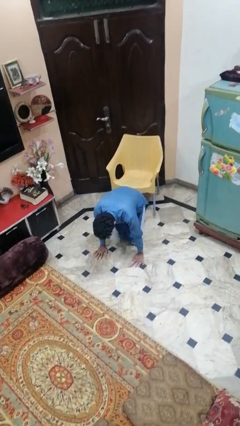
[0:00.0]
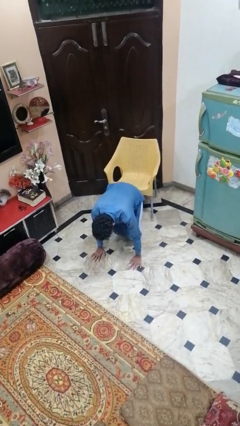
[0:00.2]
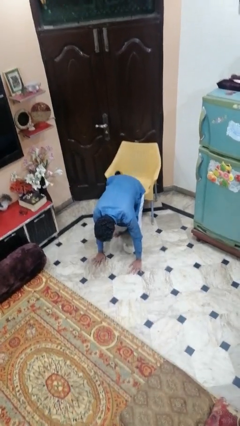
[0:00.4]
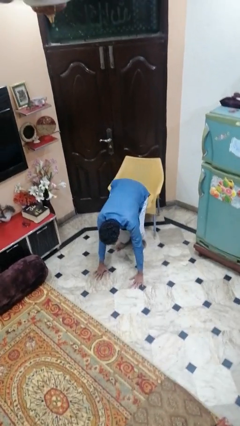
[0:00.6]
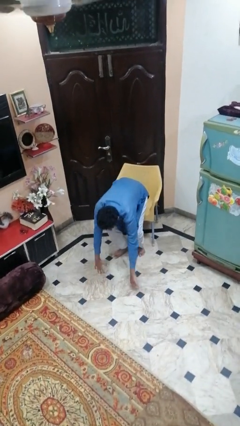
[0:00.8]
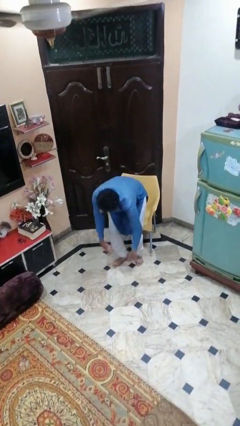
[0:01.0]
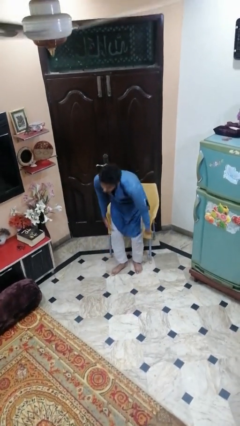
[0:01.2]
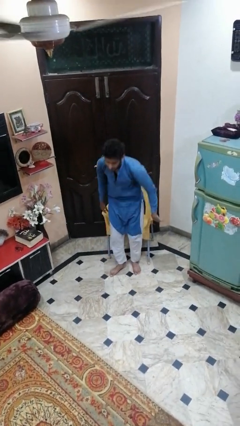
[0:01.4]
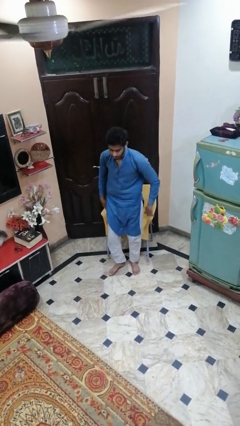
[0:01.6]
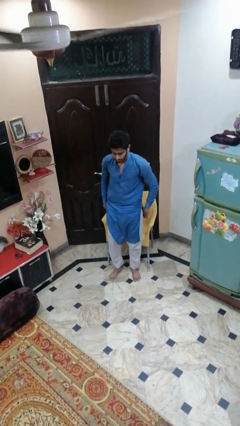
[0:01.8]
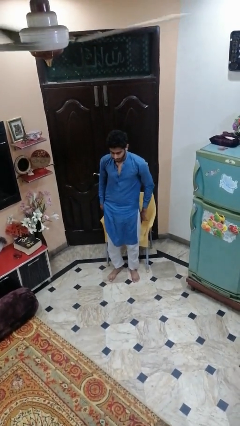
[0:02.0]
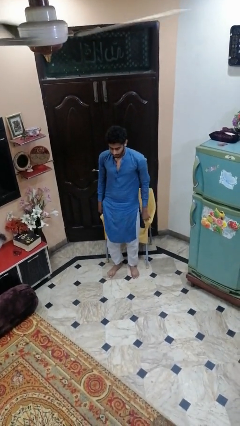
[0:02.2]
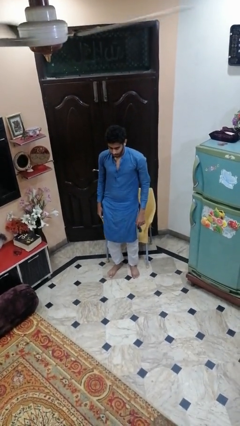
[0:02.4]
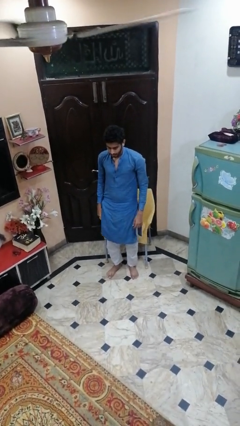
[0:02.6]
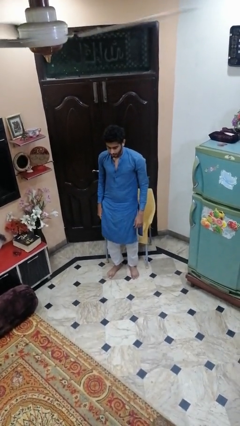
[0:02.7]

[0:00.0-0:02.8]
person stands up from floor

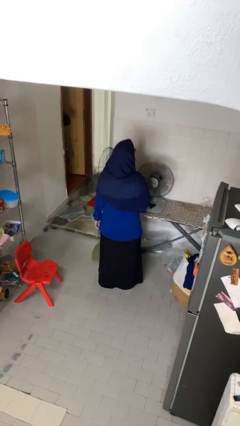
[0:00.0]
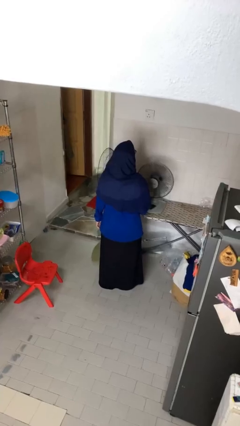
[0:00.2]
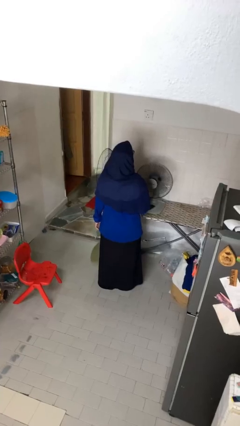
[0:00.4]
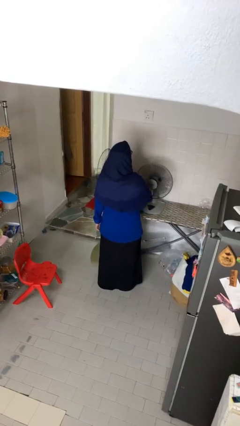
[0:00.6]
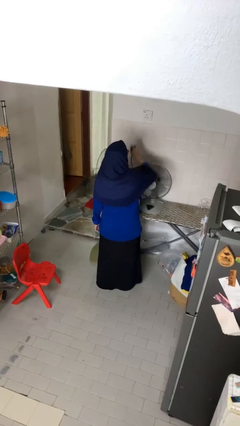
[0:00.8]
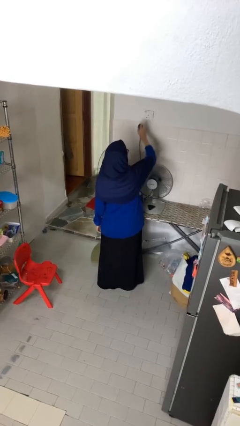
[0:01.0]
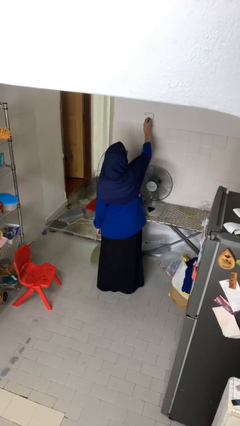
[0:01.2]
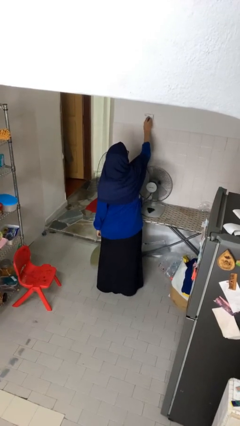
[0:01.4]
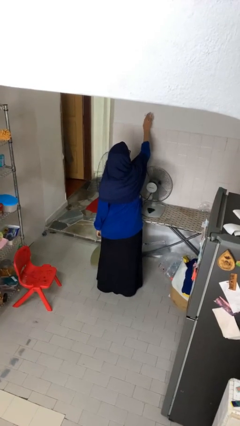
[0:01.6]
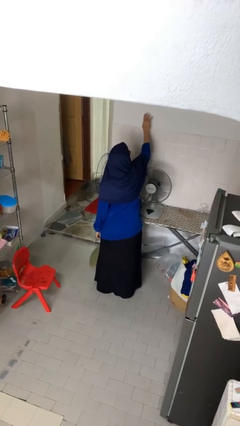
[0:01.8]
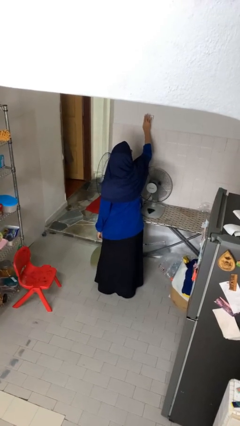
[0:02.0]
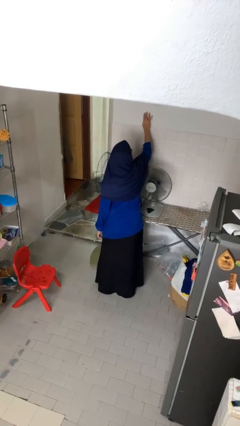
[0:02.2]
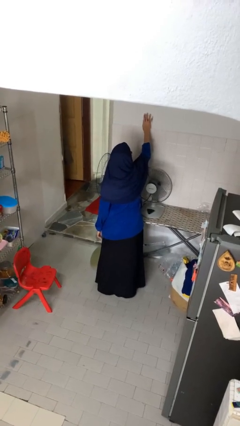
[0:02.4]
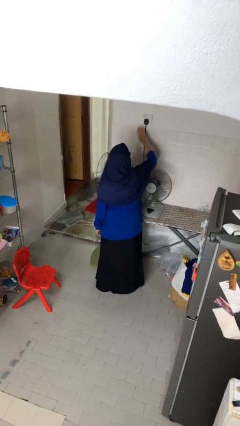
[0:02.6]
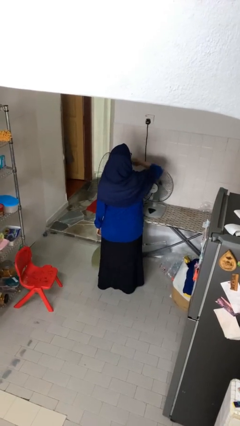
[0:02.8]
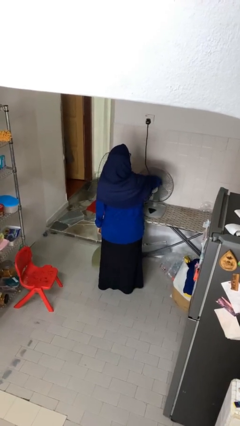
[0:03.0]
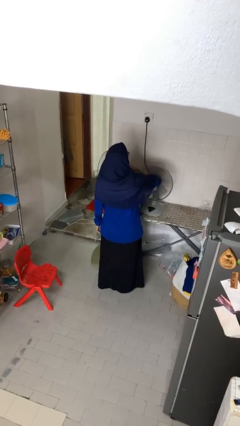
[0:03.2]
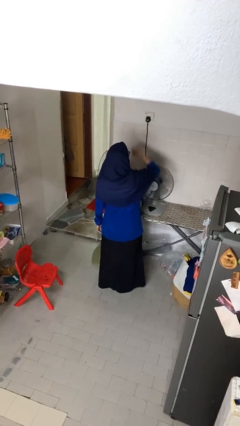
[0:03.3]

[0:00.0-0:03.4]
person plugs into electrical socket

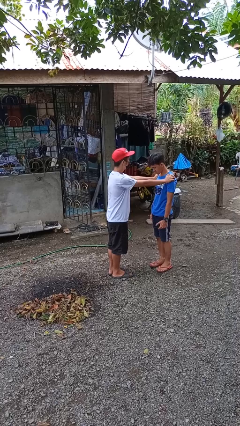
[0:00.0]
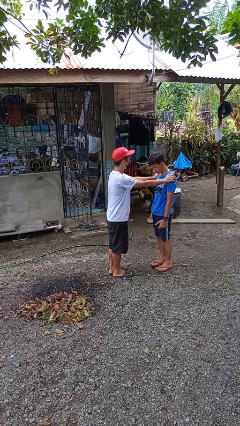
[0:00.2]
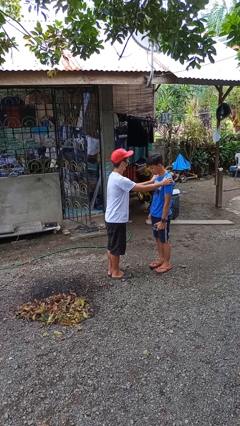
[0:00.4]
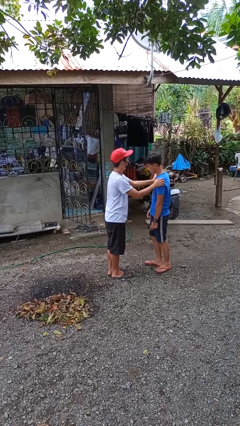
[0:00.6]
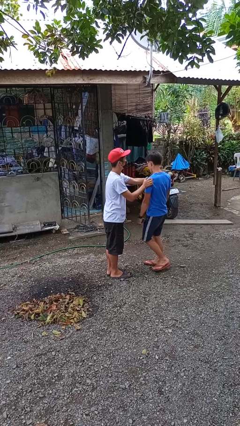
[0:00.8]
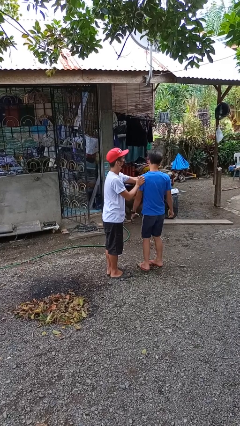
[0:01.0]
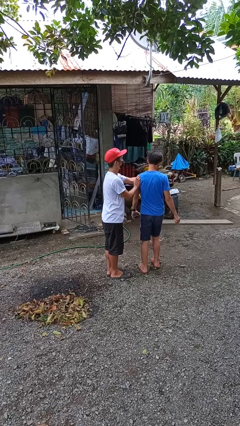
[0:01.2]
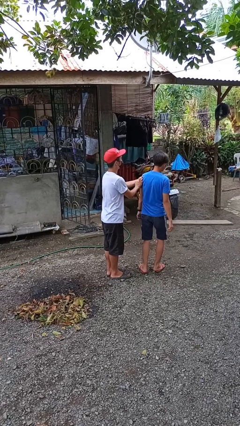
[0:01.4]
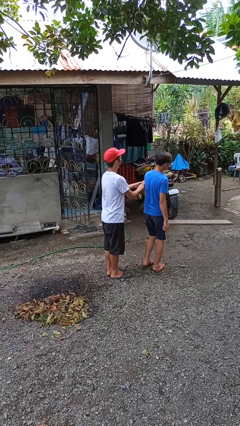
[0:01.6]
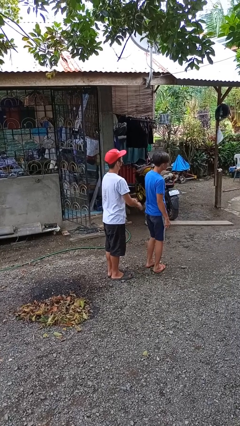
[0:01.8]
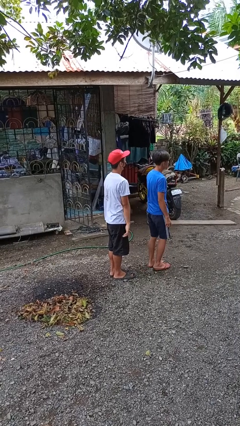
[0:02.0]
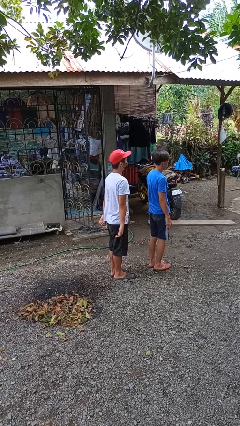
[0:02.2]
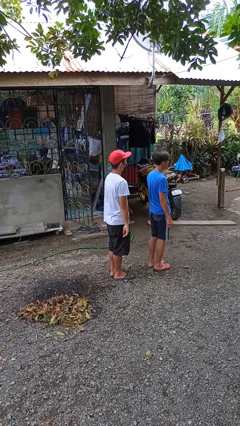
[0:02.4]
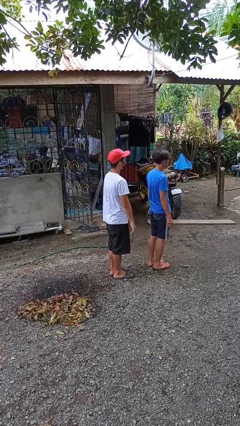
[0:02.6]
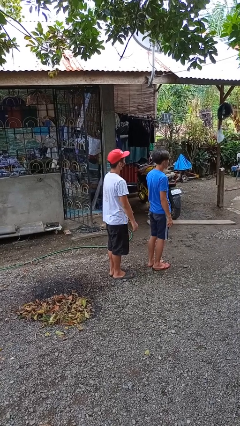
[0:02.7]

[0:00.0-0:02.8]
person spins person around

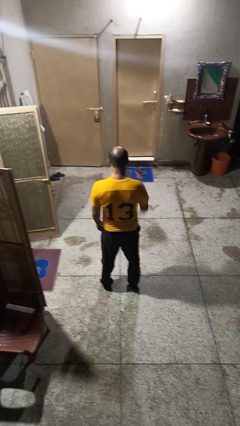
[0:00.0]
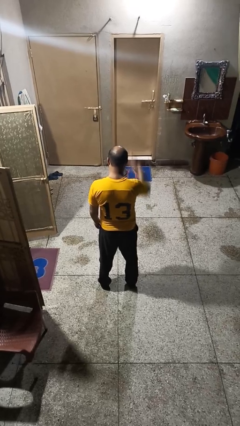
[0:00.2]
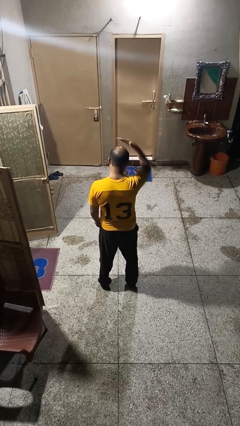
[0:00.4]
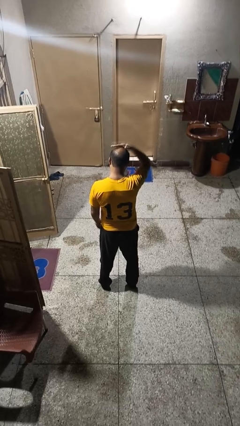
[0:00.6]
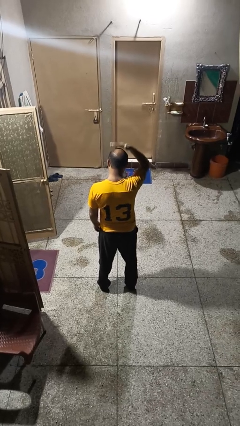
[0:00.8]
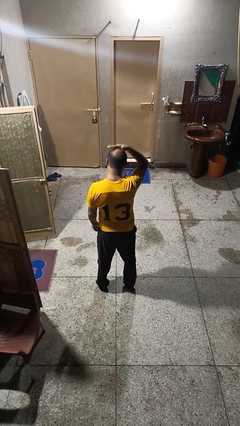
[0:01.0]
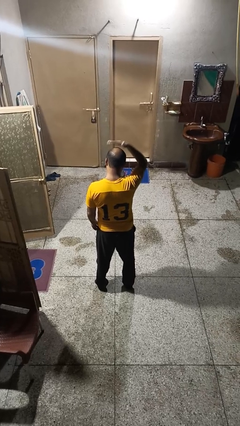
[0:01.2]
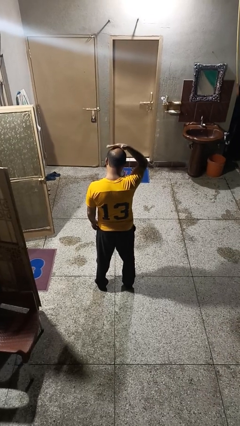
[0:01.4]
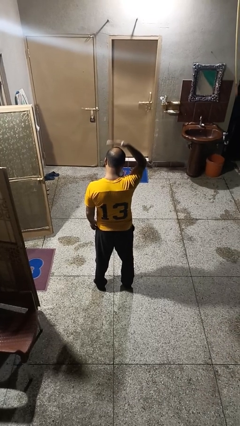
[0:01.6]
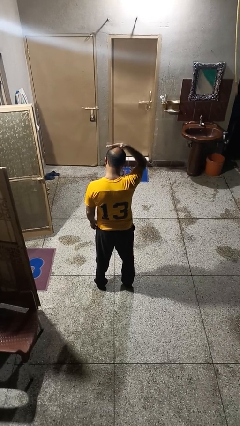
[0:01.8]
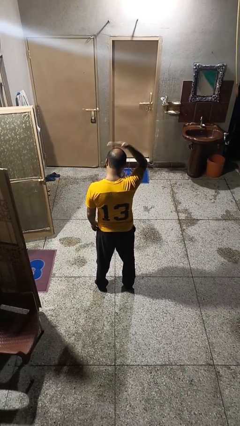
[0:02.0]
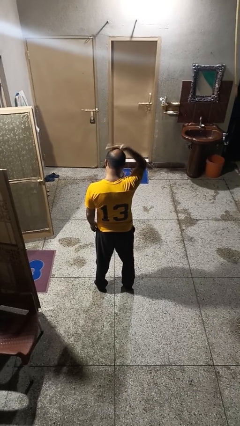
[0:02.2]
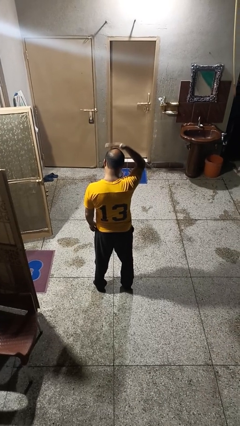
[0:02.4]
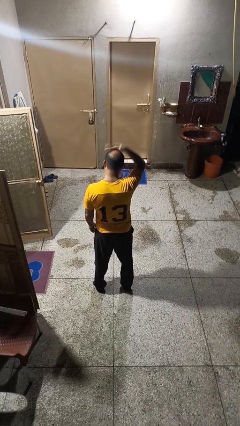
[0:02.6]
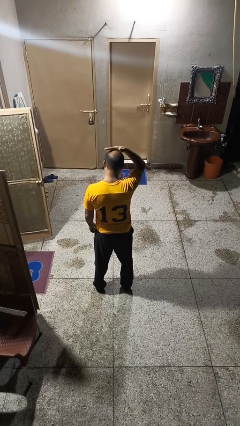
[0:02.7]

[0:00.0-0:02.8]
person pats head

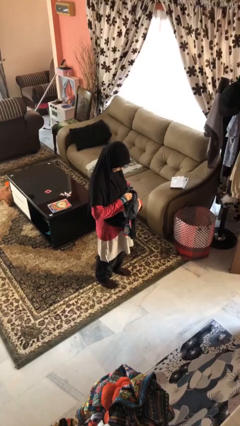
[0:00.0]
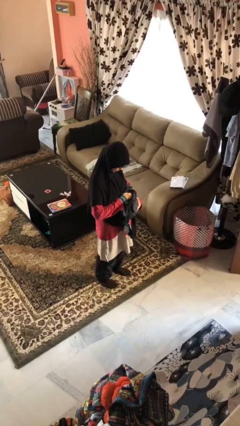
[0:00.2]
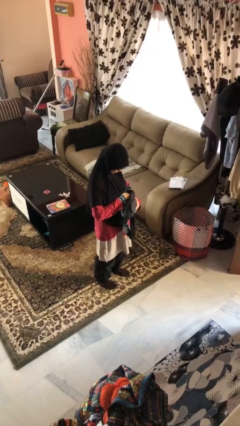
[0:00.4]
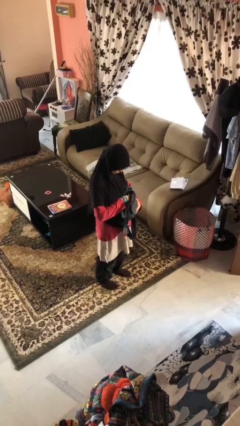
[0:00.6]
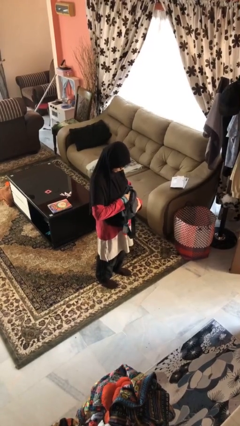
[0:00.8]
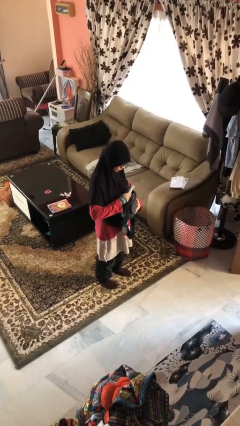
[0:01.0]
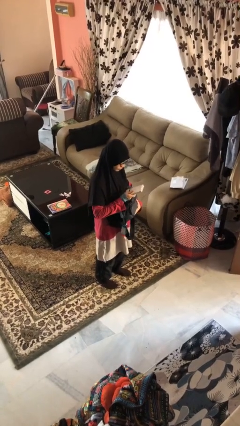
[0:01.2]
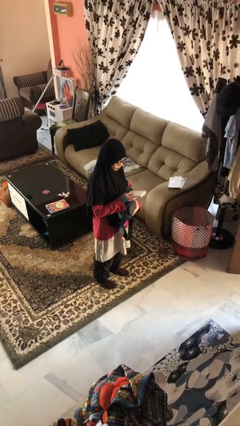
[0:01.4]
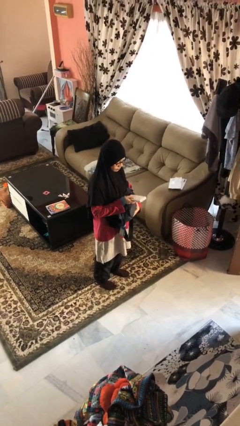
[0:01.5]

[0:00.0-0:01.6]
person takes object from purse

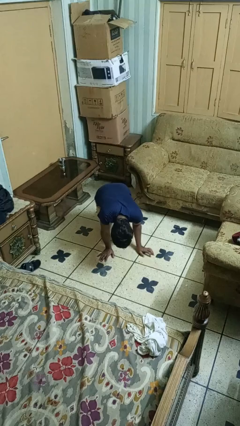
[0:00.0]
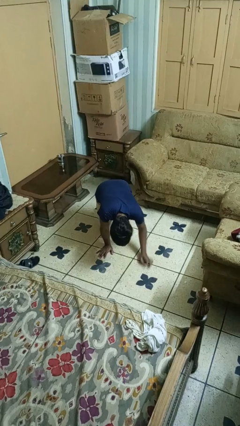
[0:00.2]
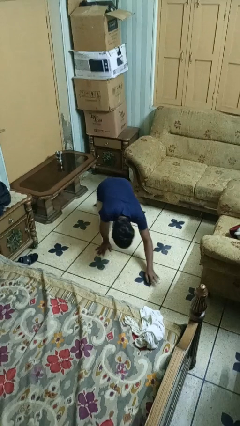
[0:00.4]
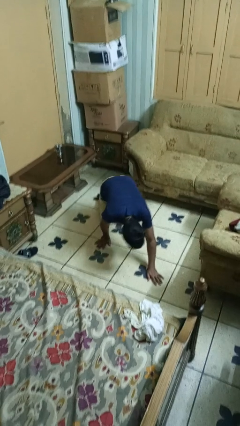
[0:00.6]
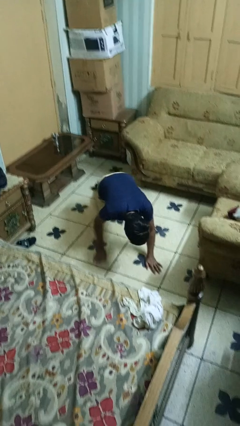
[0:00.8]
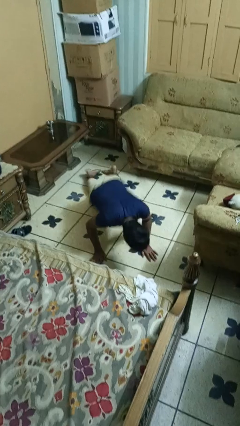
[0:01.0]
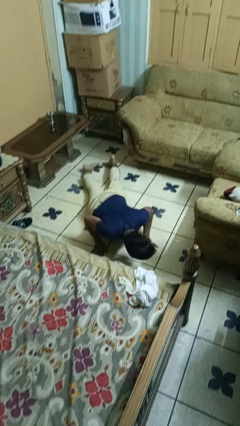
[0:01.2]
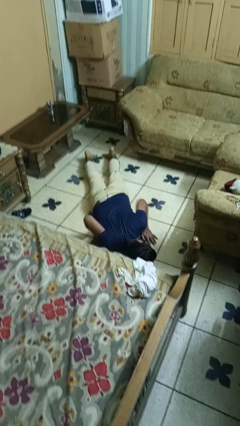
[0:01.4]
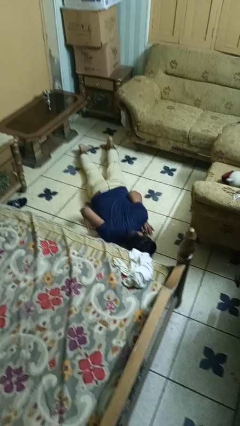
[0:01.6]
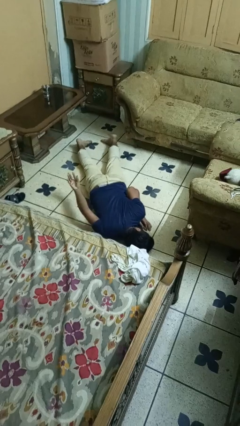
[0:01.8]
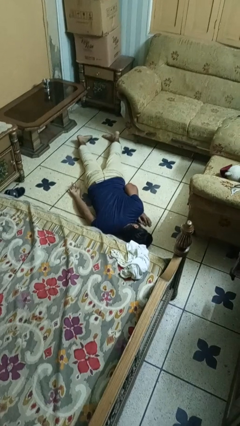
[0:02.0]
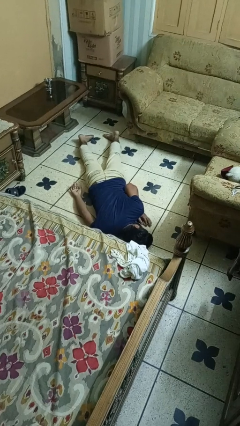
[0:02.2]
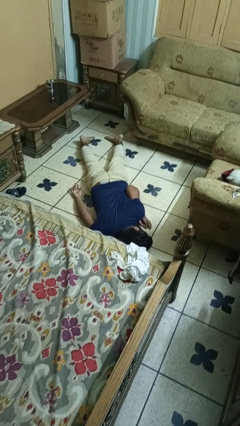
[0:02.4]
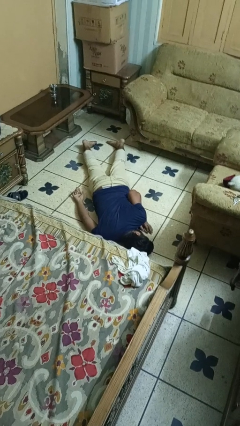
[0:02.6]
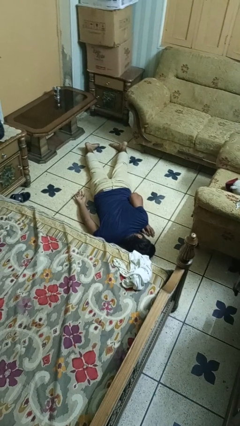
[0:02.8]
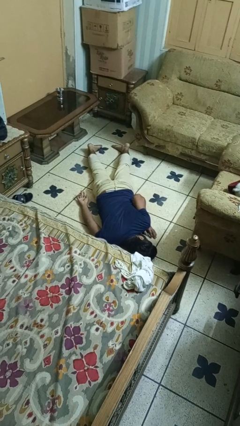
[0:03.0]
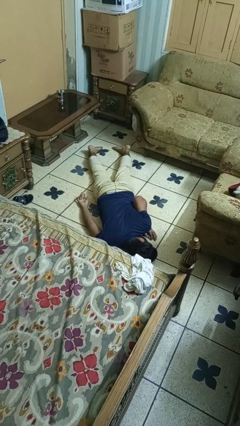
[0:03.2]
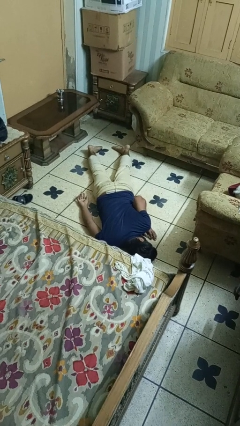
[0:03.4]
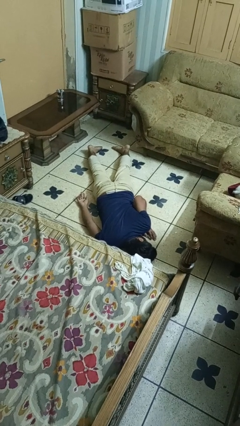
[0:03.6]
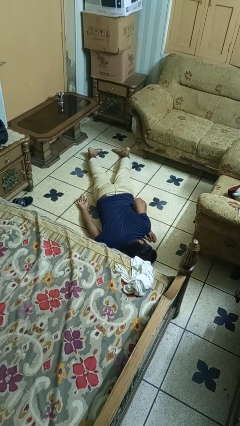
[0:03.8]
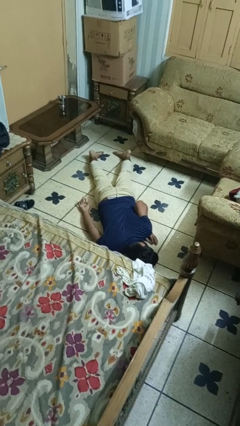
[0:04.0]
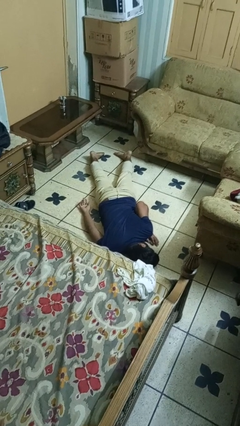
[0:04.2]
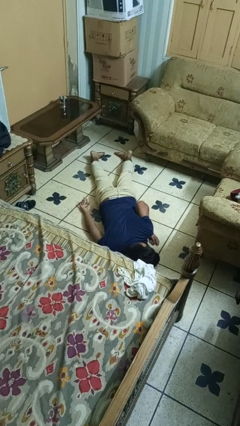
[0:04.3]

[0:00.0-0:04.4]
person lies down on floor
